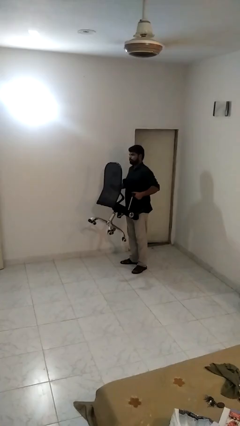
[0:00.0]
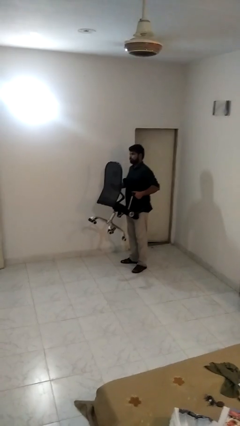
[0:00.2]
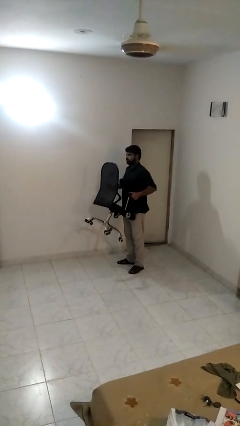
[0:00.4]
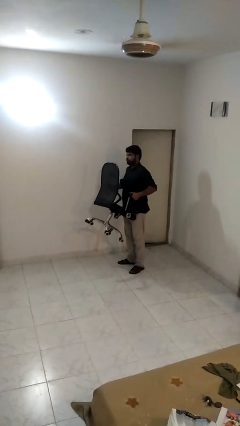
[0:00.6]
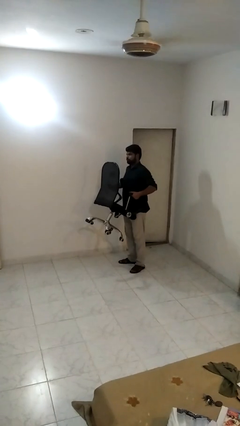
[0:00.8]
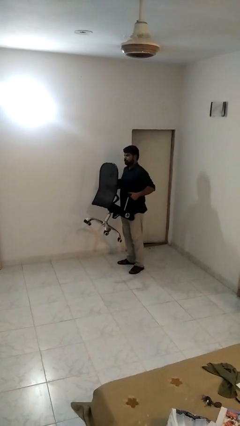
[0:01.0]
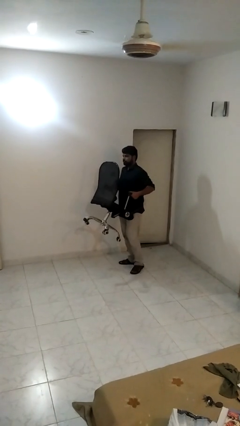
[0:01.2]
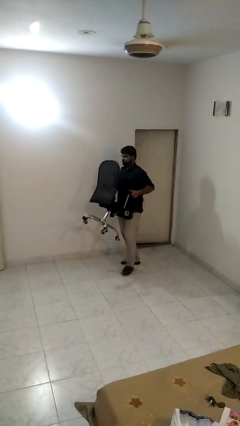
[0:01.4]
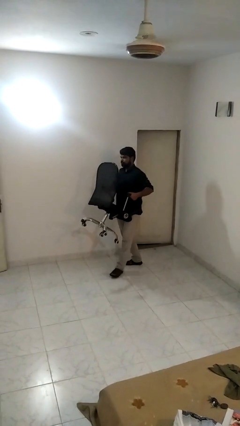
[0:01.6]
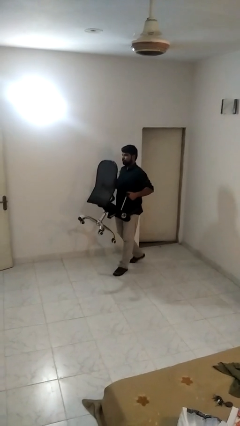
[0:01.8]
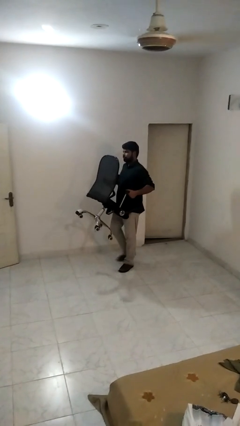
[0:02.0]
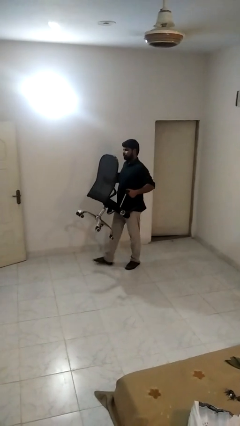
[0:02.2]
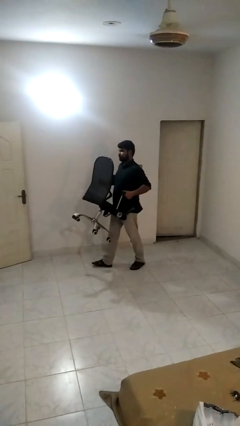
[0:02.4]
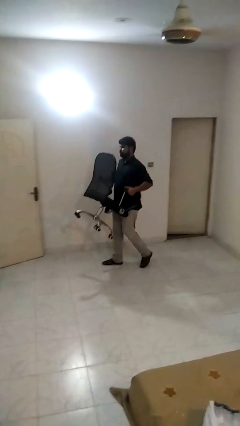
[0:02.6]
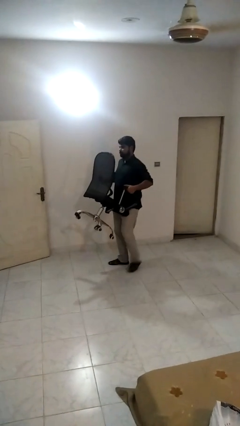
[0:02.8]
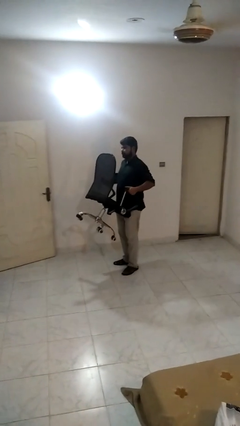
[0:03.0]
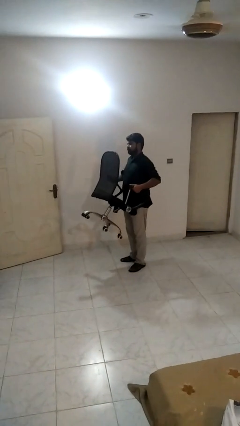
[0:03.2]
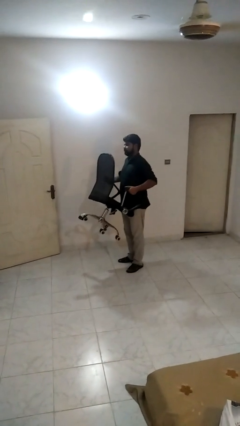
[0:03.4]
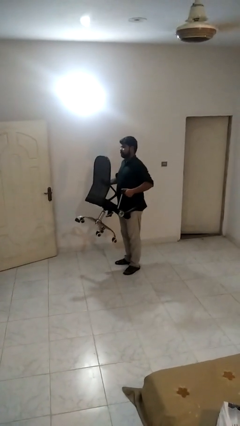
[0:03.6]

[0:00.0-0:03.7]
person carries furniture

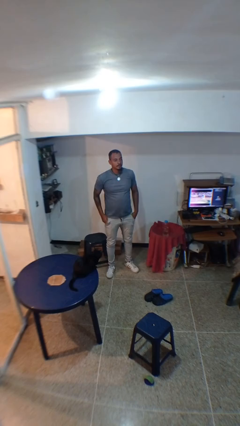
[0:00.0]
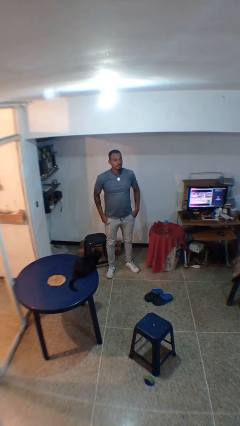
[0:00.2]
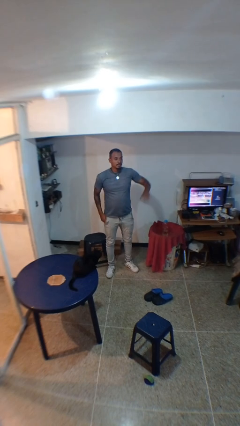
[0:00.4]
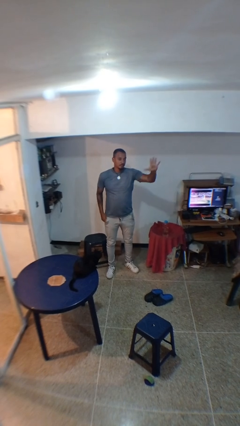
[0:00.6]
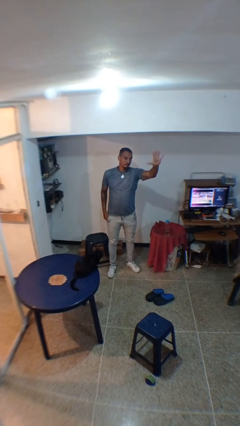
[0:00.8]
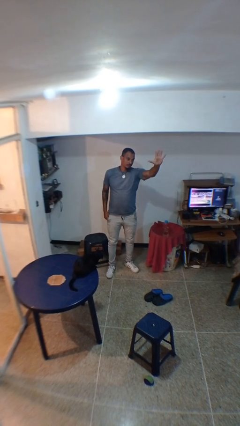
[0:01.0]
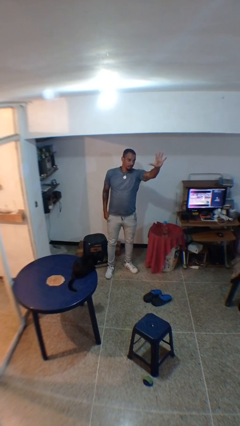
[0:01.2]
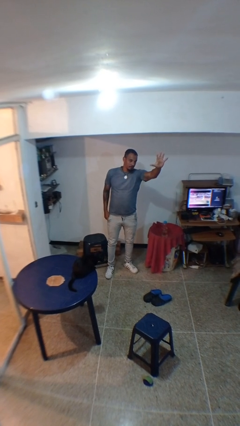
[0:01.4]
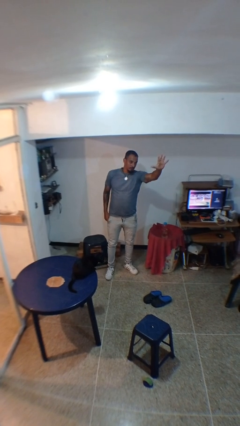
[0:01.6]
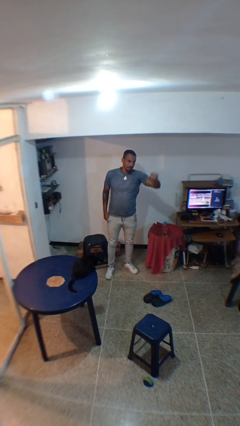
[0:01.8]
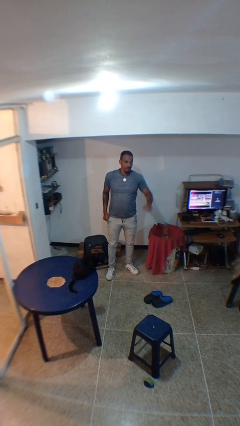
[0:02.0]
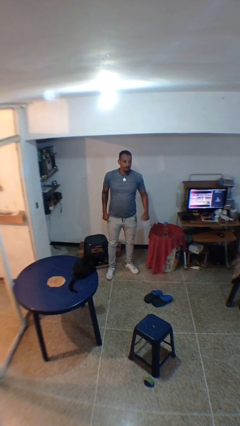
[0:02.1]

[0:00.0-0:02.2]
person gestures number five

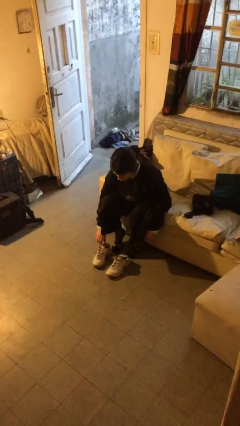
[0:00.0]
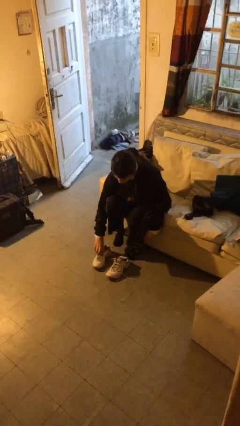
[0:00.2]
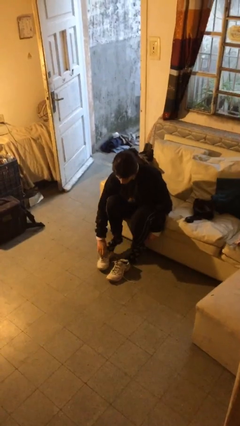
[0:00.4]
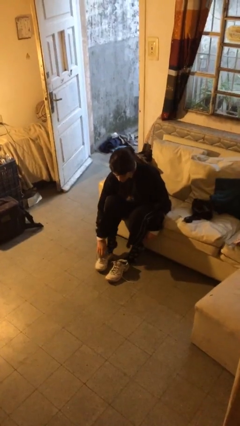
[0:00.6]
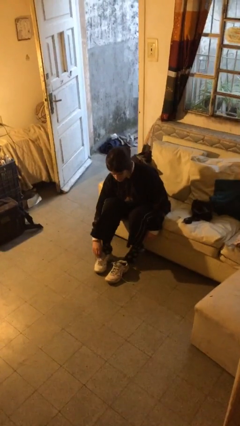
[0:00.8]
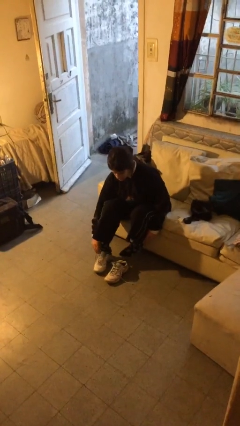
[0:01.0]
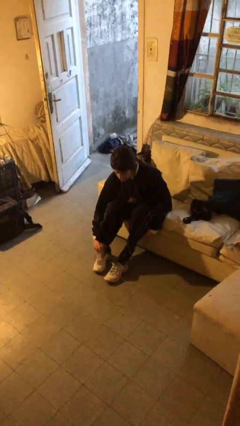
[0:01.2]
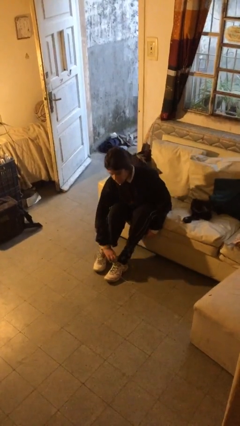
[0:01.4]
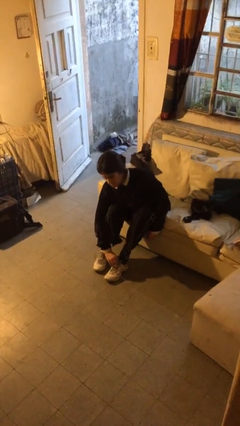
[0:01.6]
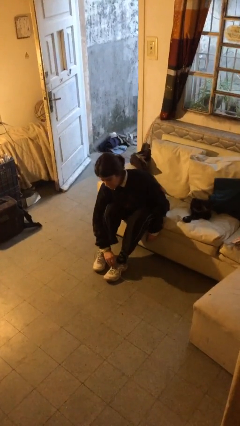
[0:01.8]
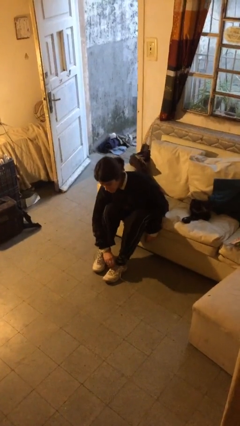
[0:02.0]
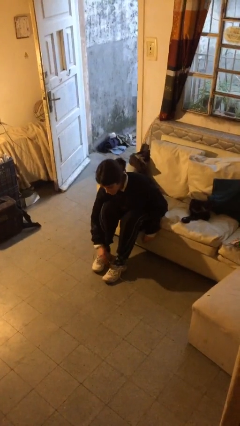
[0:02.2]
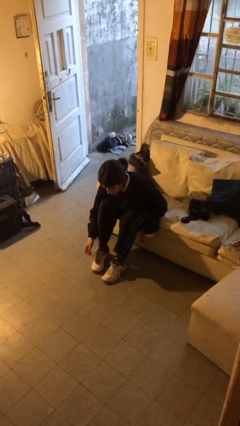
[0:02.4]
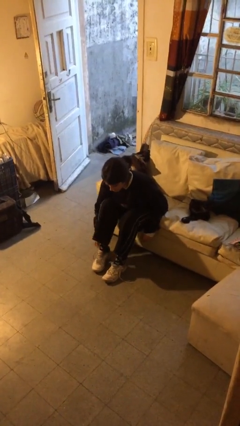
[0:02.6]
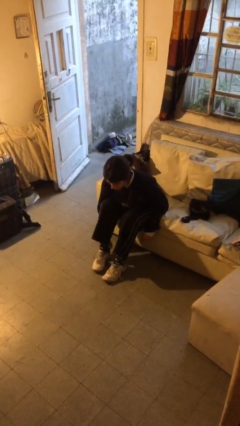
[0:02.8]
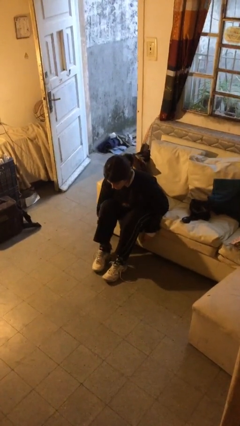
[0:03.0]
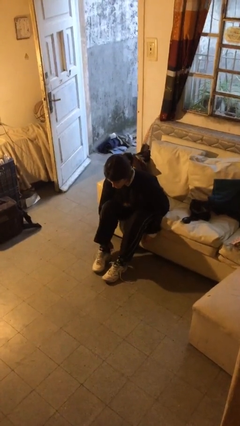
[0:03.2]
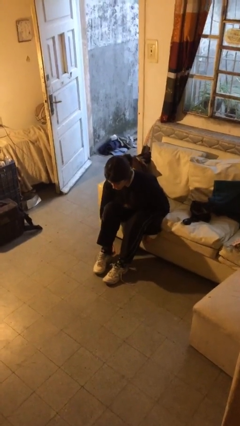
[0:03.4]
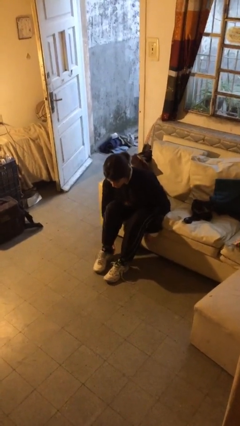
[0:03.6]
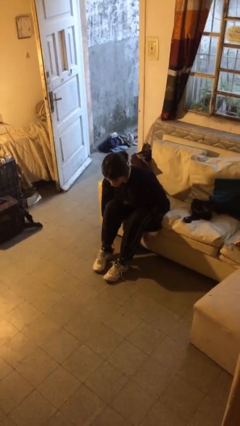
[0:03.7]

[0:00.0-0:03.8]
person puts on shoes

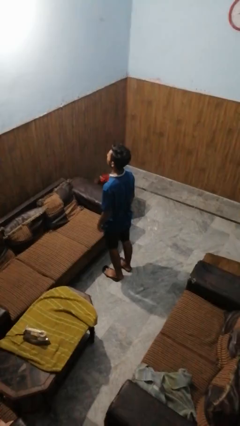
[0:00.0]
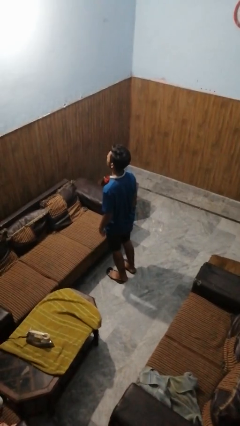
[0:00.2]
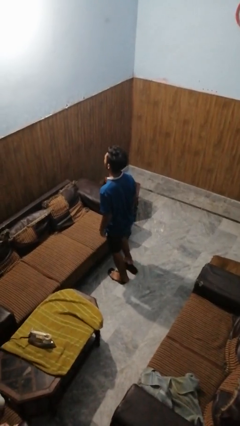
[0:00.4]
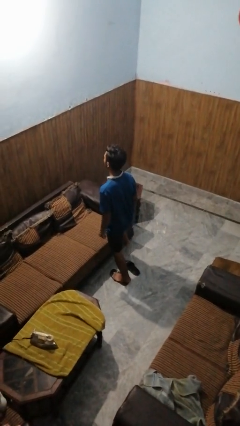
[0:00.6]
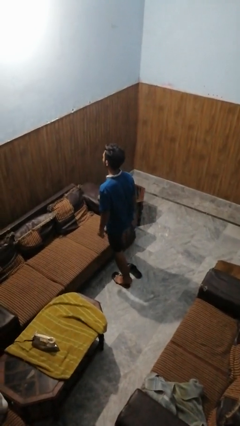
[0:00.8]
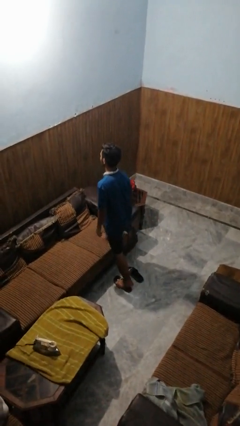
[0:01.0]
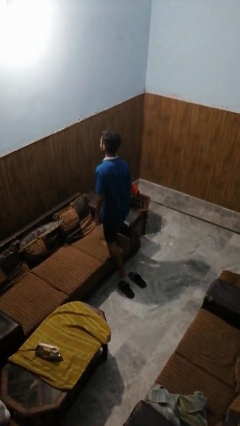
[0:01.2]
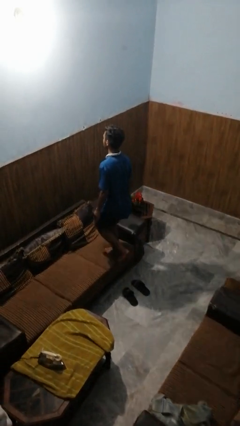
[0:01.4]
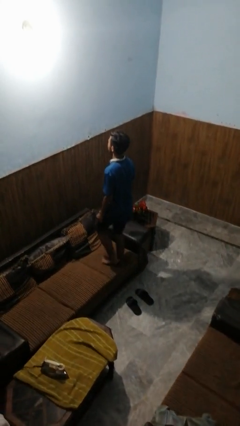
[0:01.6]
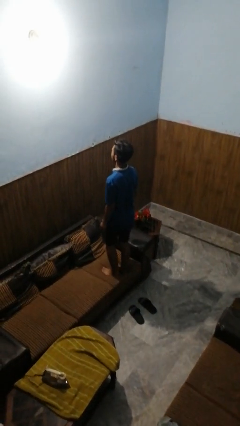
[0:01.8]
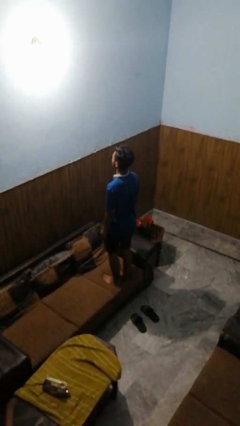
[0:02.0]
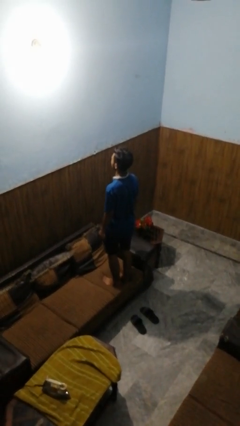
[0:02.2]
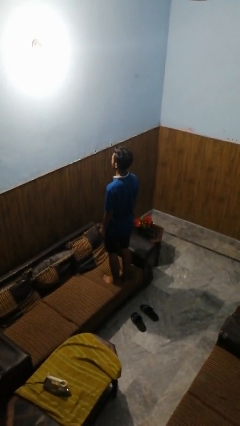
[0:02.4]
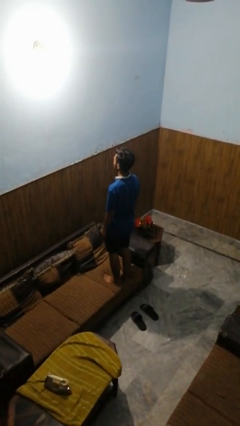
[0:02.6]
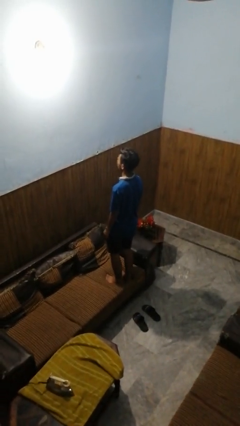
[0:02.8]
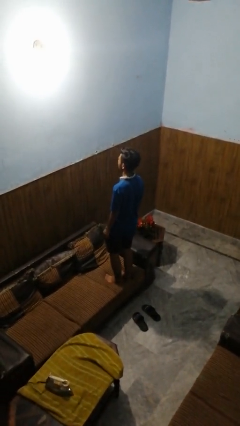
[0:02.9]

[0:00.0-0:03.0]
person climbs on couch

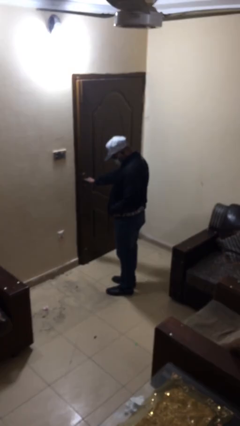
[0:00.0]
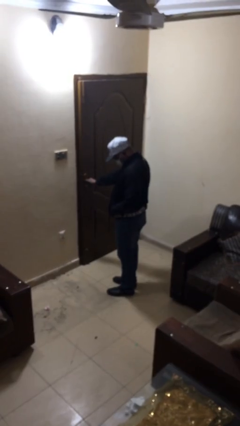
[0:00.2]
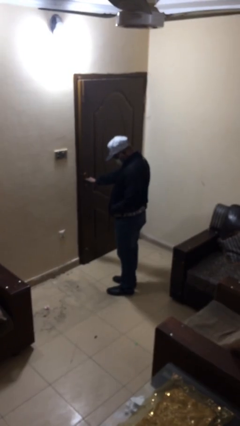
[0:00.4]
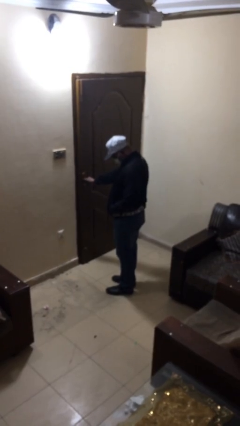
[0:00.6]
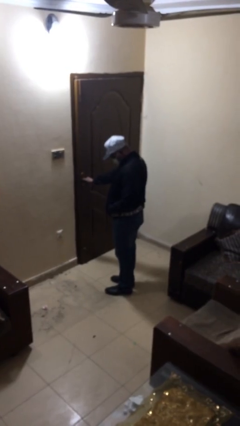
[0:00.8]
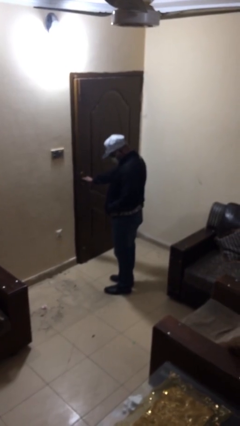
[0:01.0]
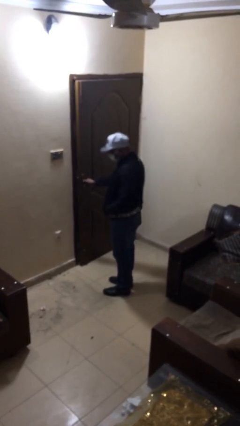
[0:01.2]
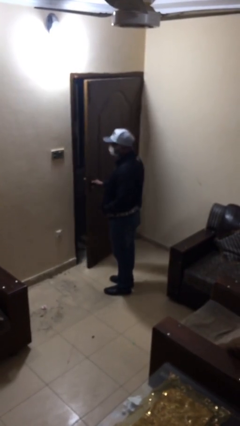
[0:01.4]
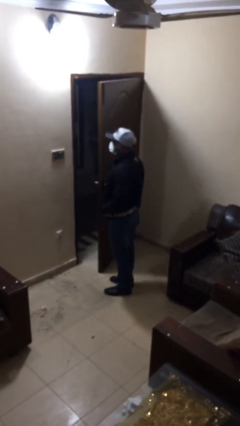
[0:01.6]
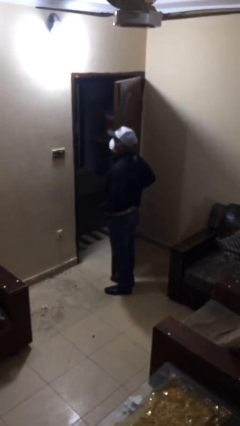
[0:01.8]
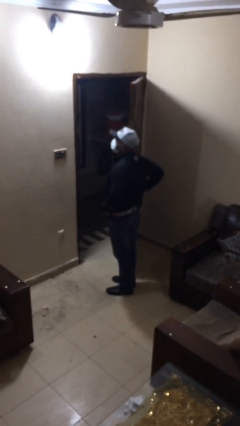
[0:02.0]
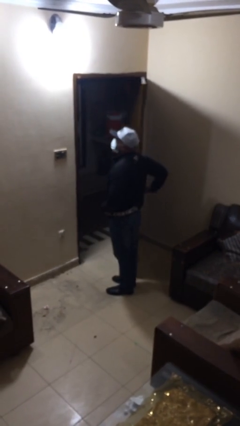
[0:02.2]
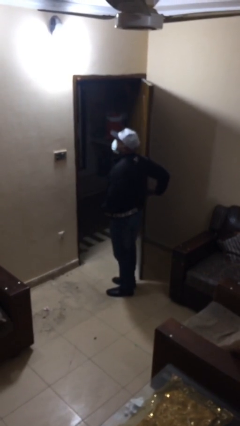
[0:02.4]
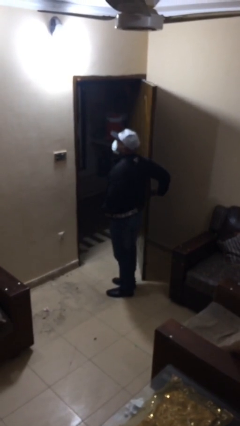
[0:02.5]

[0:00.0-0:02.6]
person opens facility door

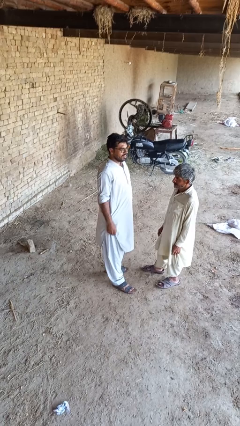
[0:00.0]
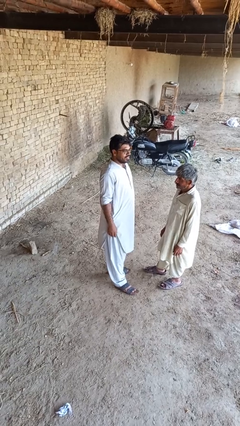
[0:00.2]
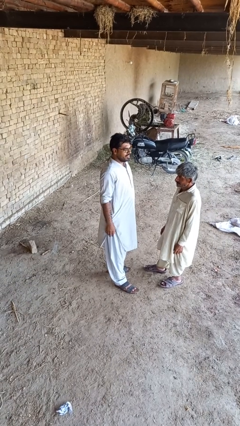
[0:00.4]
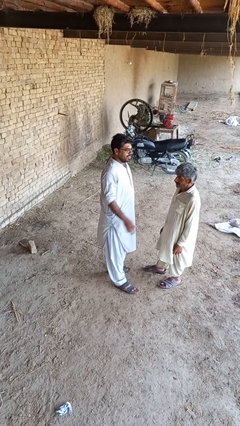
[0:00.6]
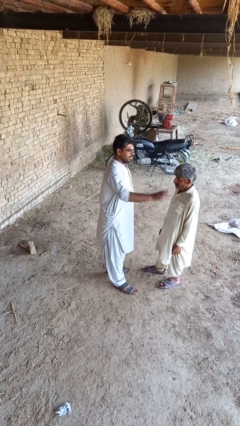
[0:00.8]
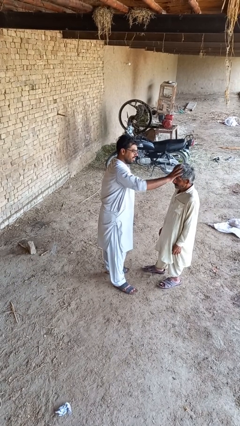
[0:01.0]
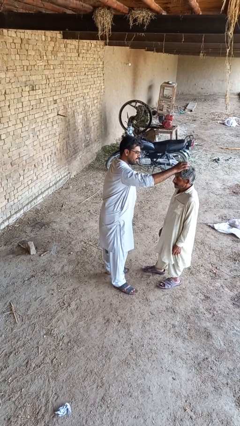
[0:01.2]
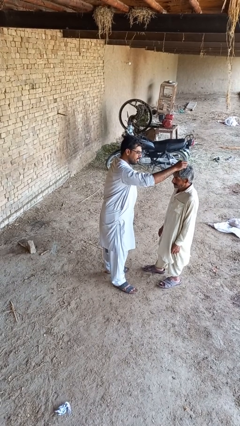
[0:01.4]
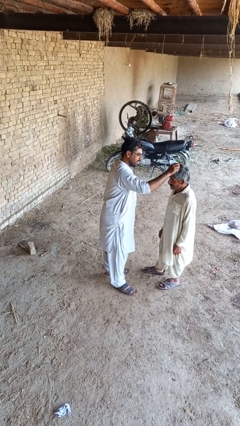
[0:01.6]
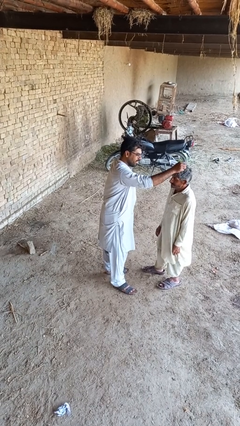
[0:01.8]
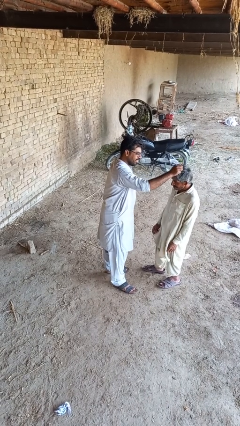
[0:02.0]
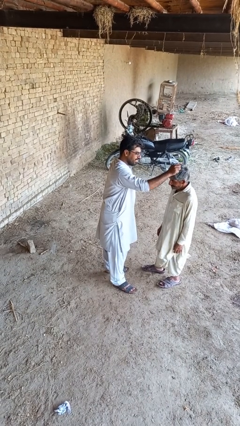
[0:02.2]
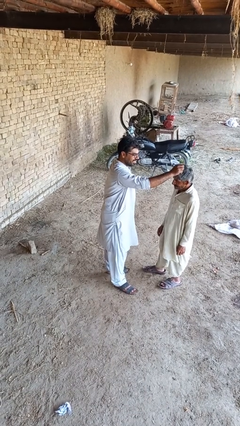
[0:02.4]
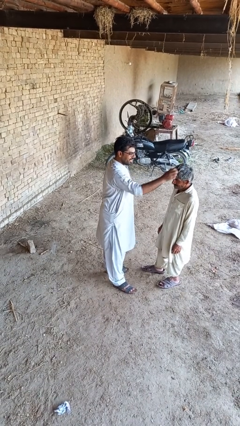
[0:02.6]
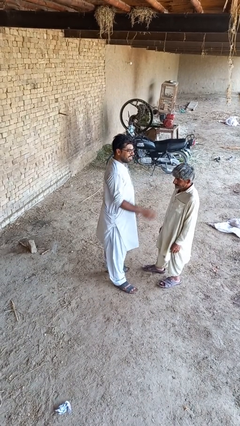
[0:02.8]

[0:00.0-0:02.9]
person grabs person by hair
